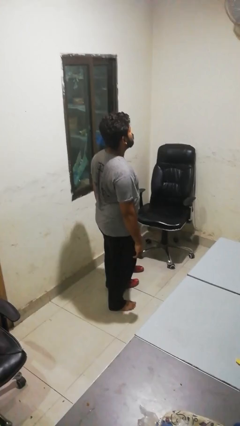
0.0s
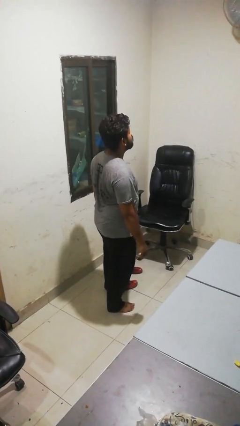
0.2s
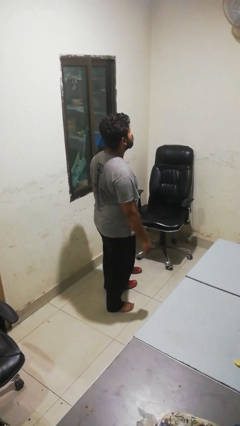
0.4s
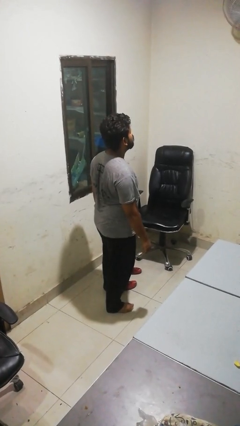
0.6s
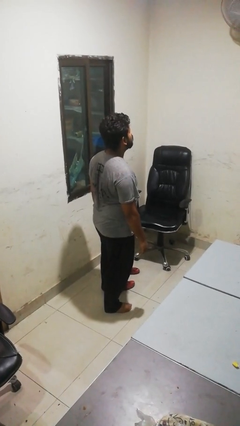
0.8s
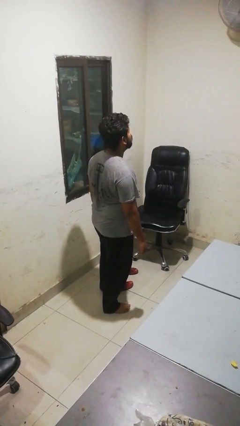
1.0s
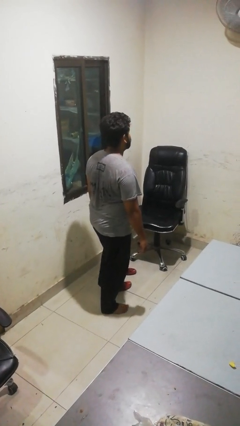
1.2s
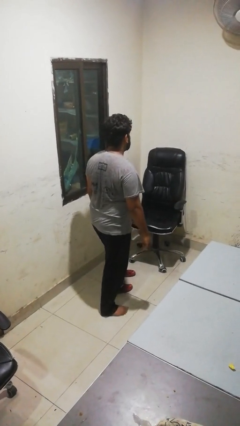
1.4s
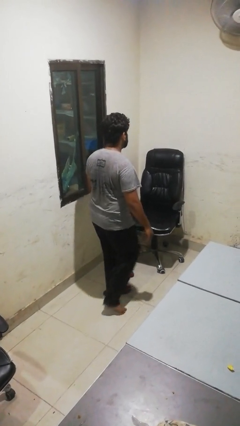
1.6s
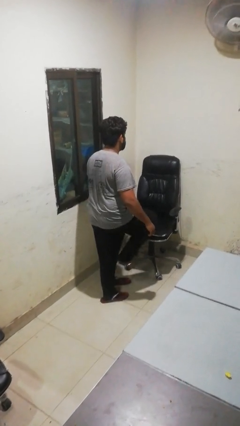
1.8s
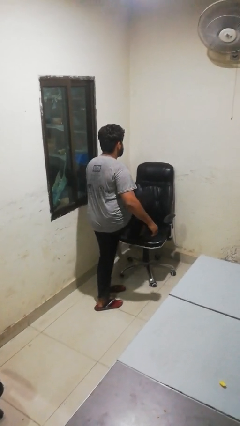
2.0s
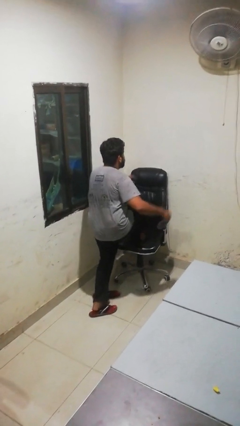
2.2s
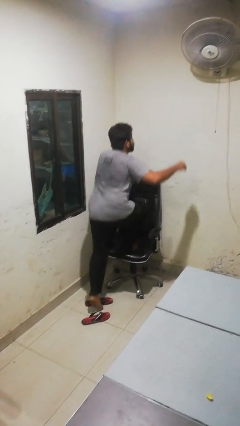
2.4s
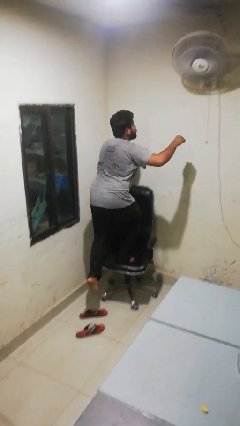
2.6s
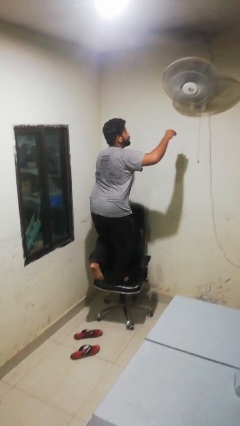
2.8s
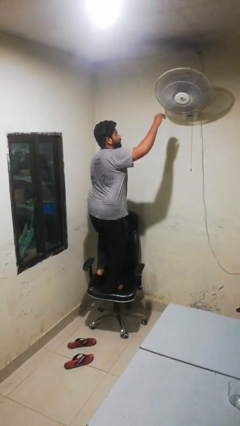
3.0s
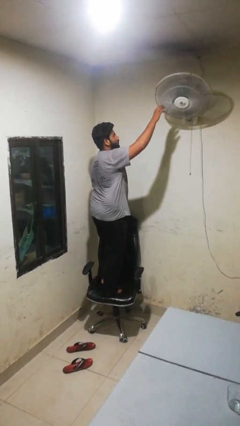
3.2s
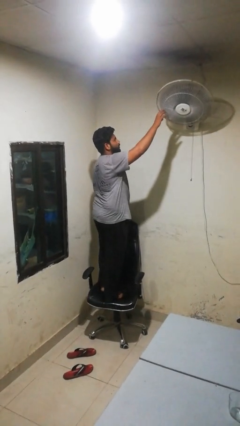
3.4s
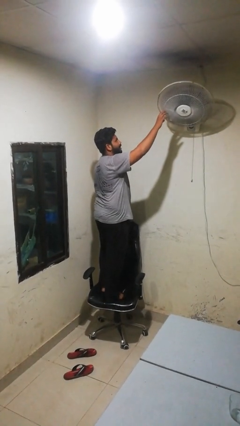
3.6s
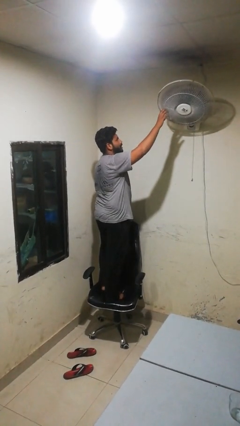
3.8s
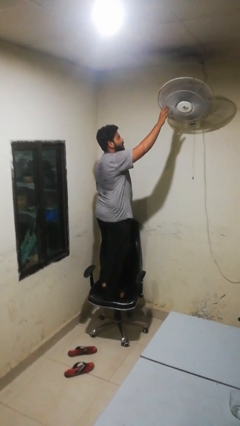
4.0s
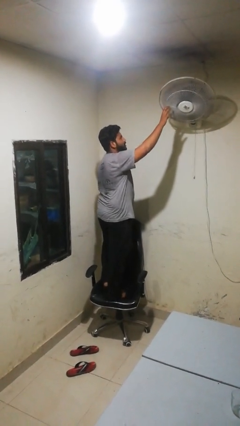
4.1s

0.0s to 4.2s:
person climbs on chair

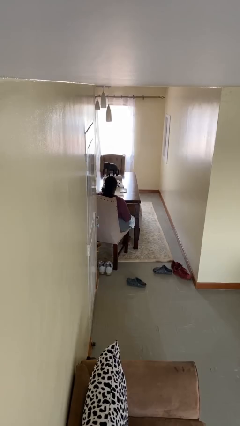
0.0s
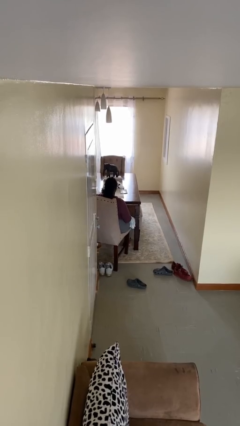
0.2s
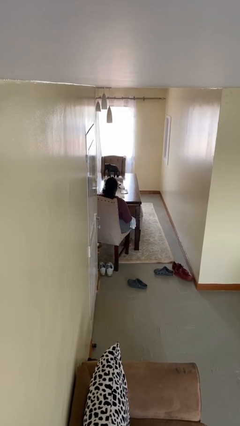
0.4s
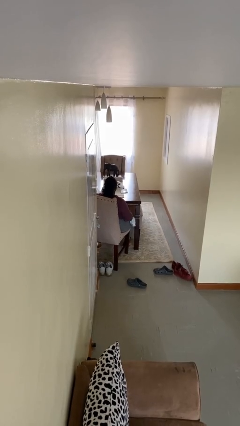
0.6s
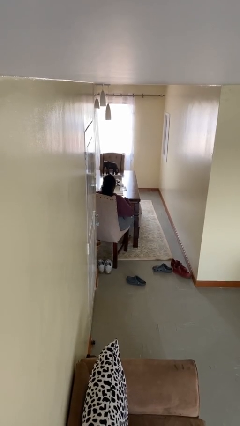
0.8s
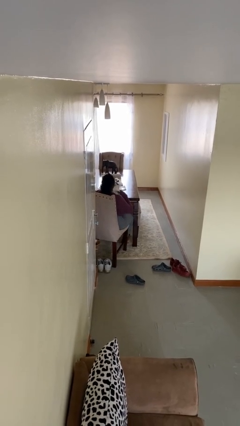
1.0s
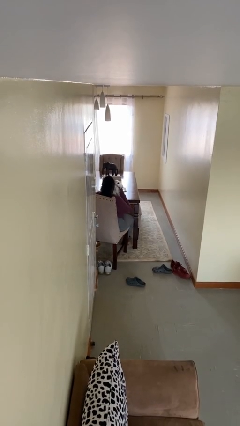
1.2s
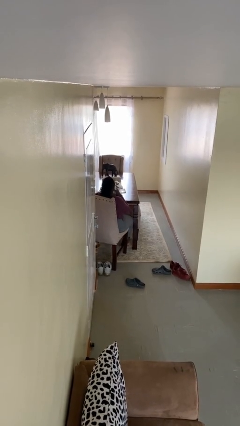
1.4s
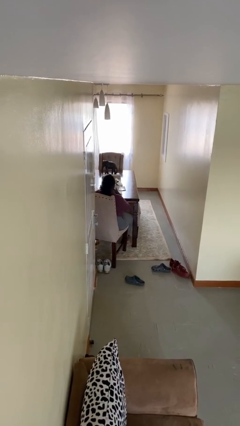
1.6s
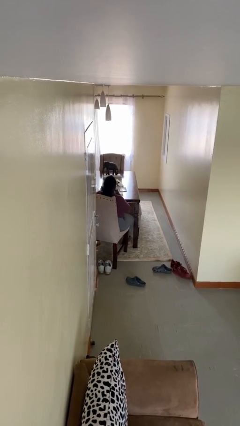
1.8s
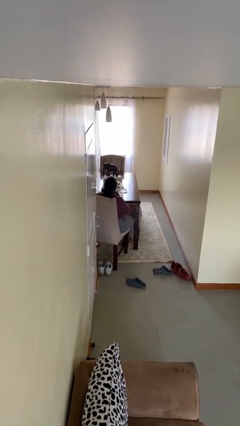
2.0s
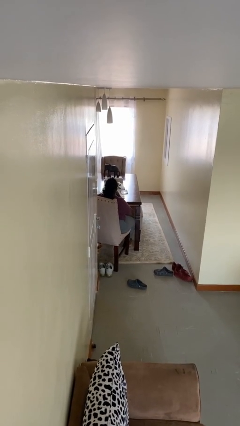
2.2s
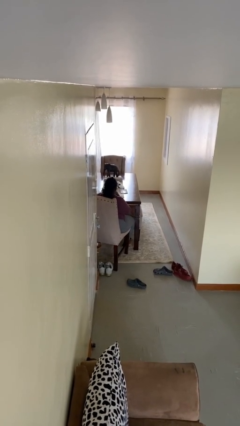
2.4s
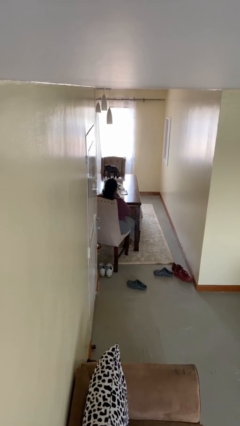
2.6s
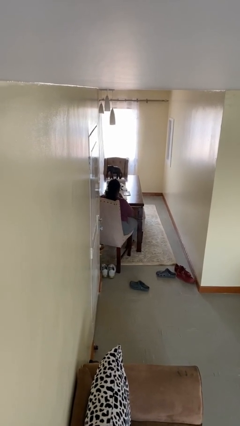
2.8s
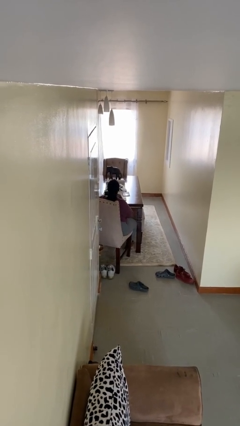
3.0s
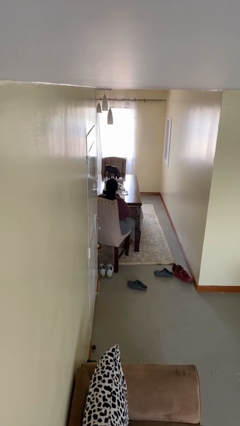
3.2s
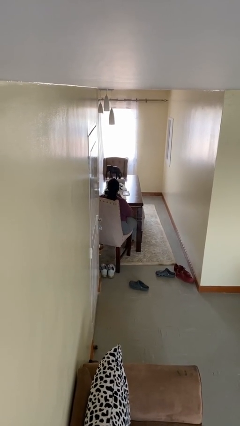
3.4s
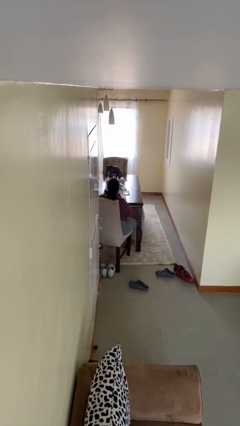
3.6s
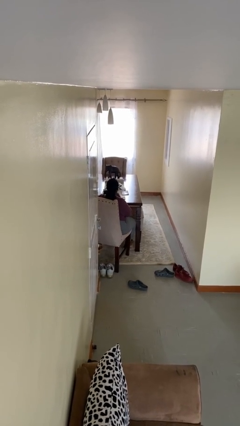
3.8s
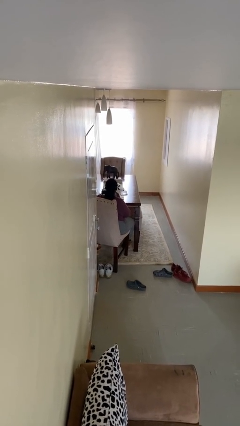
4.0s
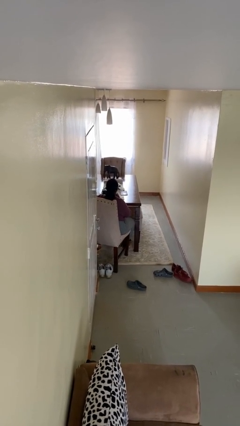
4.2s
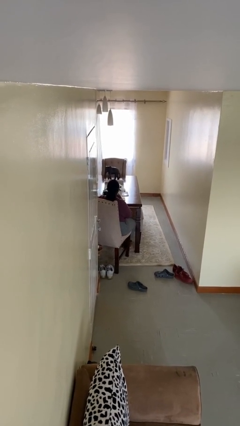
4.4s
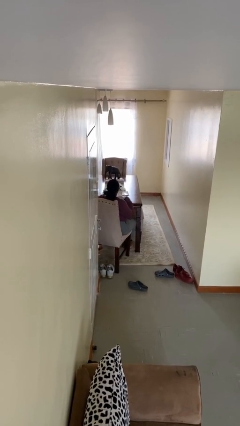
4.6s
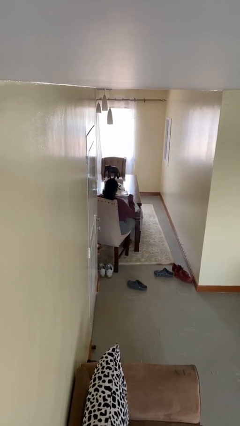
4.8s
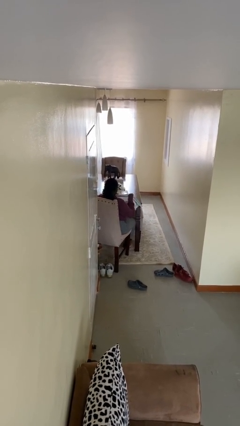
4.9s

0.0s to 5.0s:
person wipes mouth with napkin

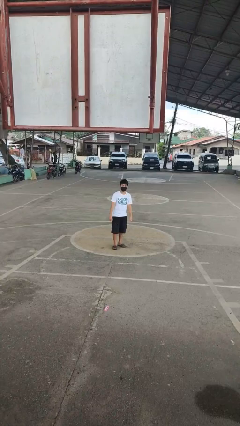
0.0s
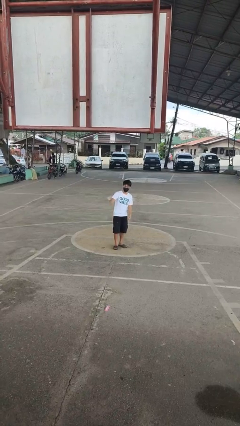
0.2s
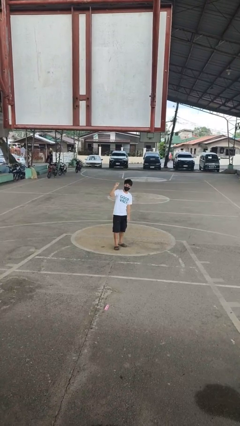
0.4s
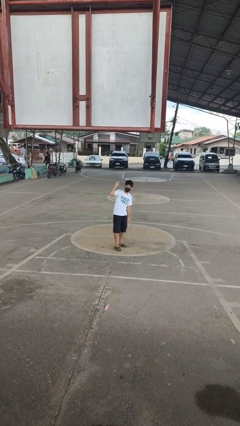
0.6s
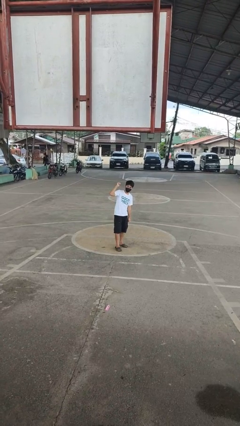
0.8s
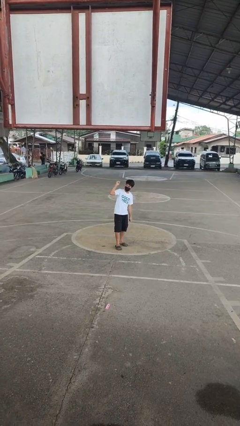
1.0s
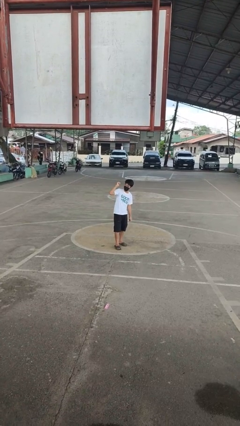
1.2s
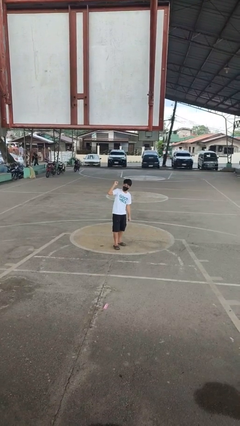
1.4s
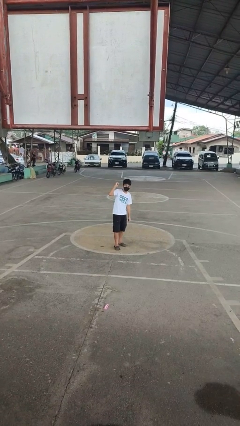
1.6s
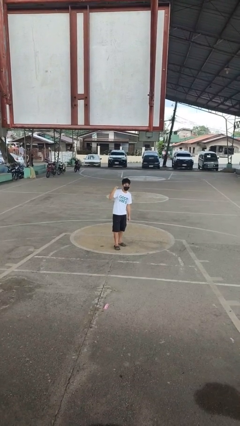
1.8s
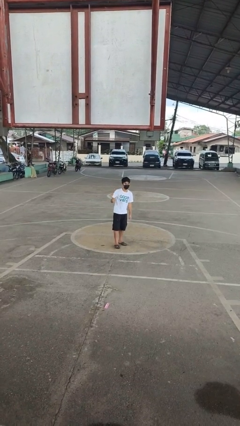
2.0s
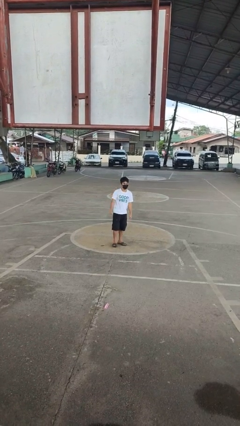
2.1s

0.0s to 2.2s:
person gestures behind me

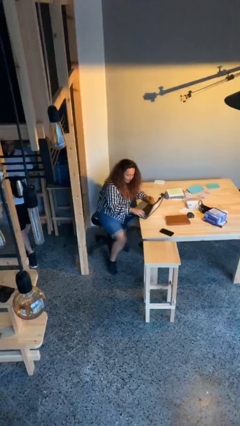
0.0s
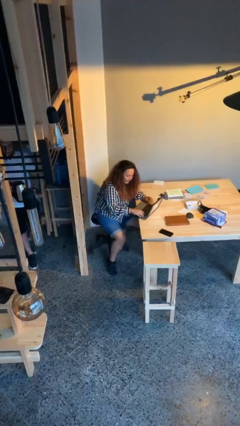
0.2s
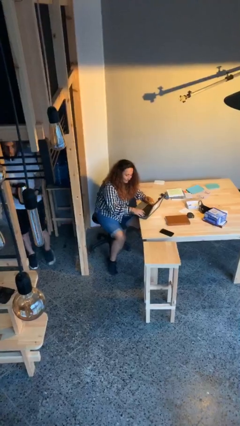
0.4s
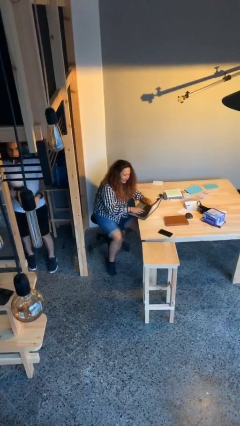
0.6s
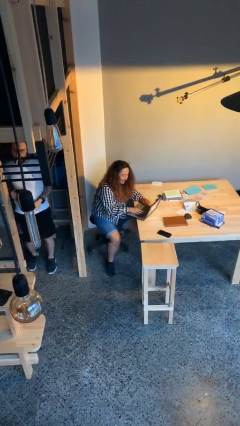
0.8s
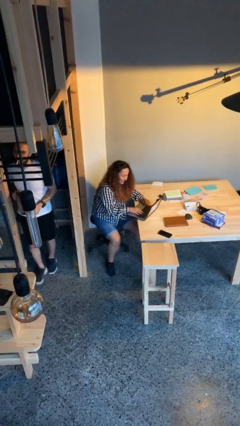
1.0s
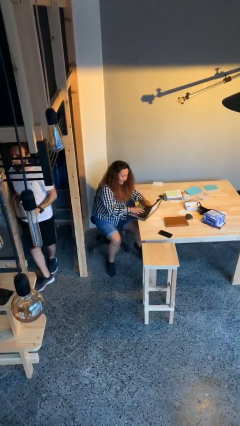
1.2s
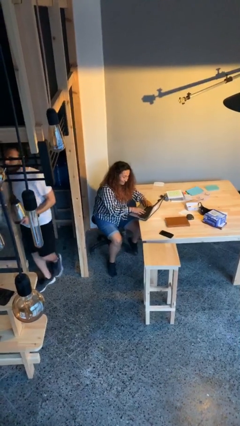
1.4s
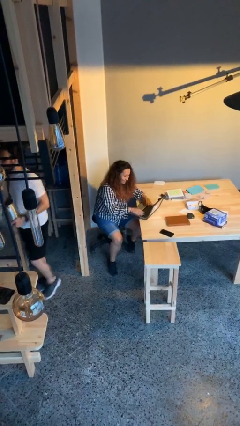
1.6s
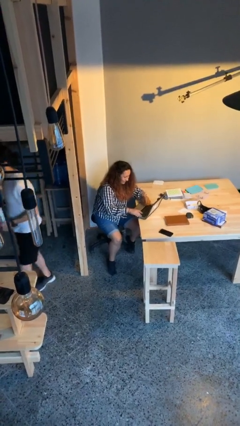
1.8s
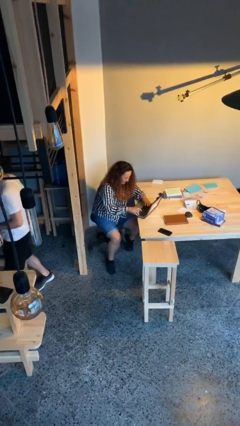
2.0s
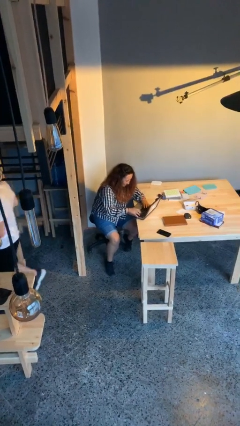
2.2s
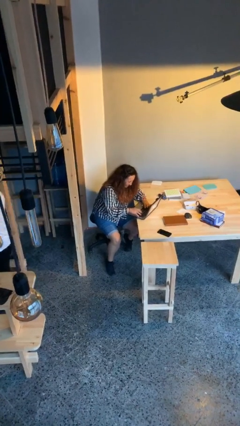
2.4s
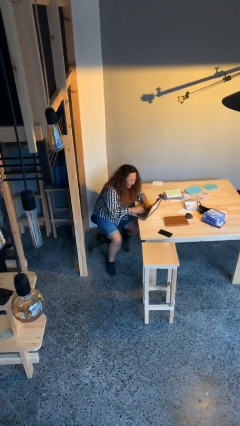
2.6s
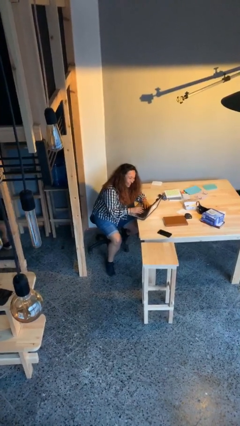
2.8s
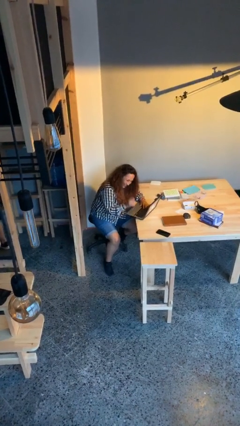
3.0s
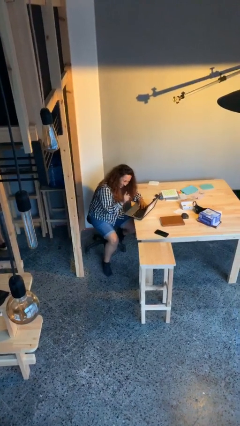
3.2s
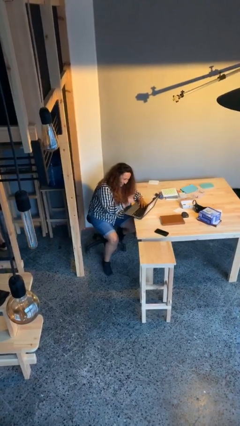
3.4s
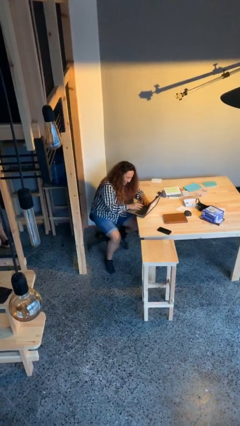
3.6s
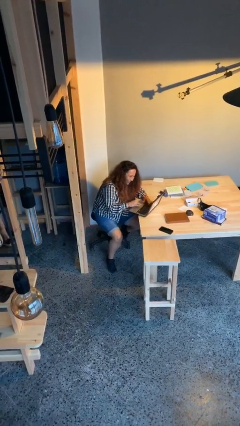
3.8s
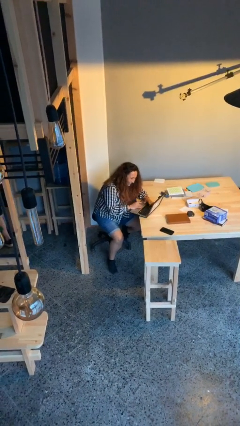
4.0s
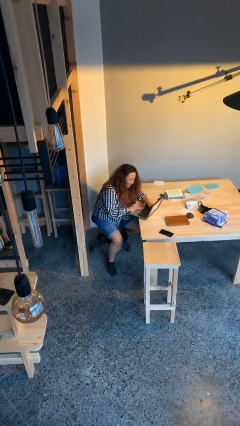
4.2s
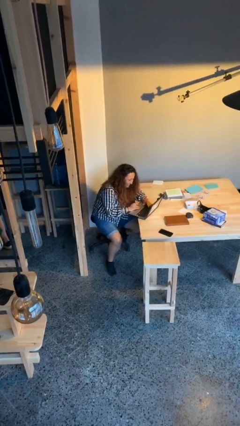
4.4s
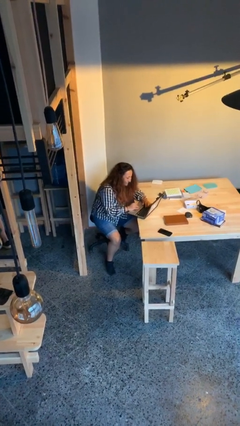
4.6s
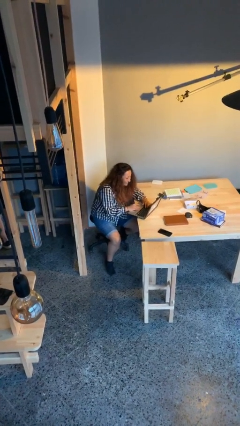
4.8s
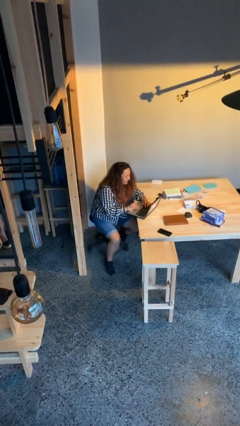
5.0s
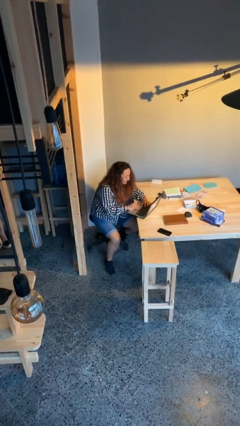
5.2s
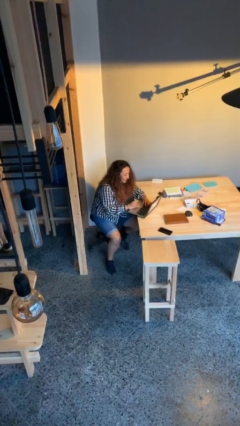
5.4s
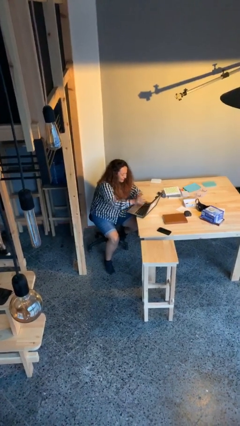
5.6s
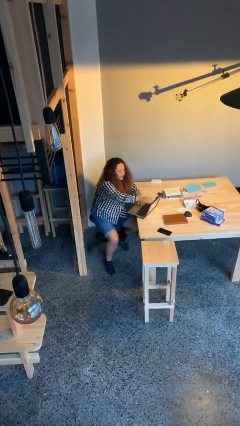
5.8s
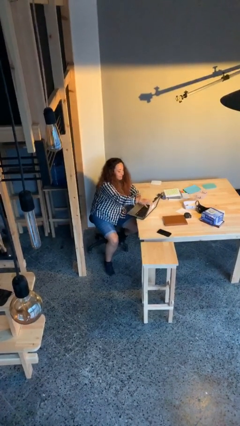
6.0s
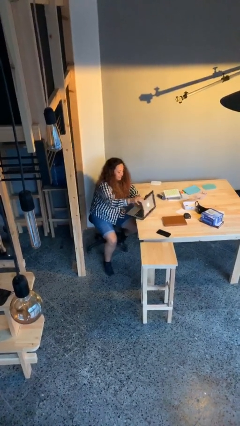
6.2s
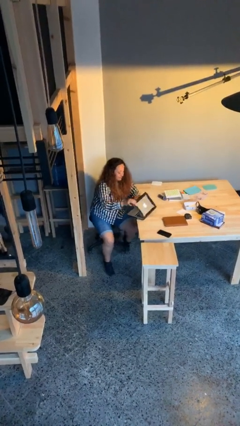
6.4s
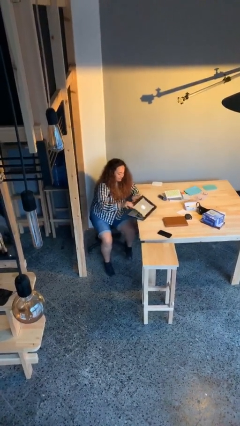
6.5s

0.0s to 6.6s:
person interacts with laptop

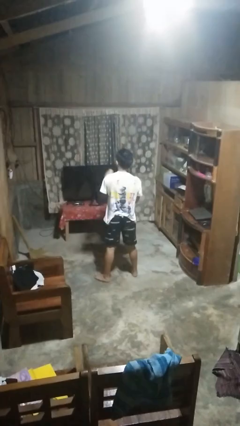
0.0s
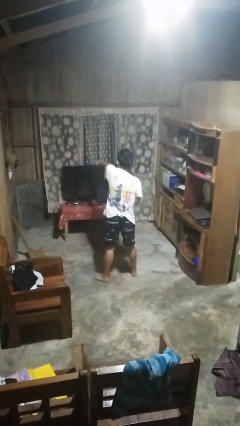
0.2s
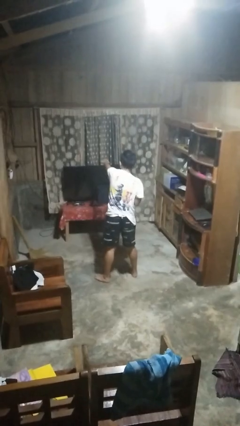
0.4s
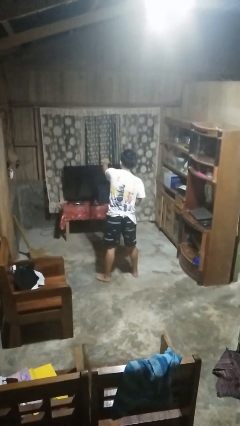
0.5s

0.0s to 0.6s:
person punches
